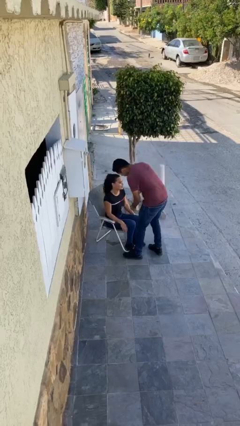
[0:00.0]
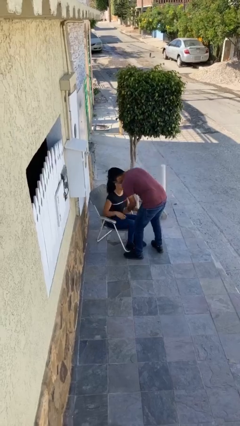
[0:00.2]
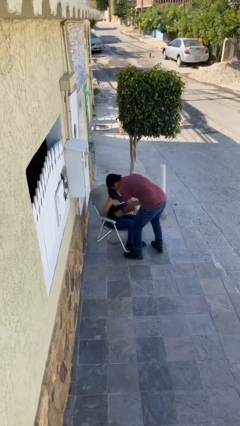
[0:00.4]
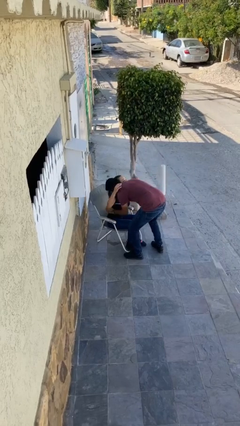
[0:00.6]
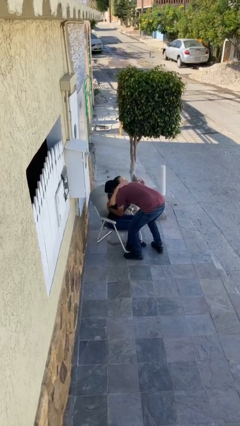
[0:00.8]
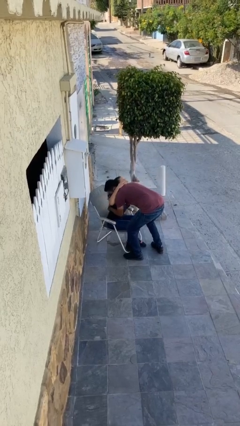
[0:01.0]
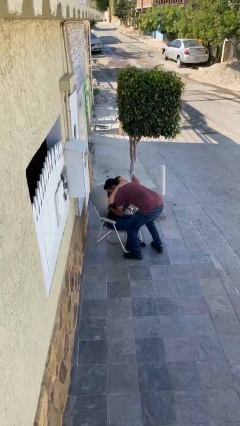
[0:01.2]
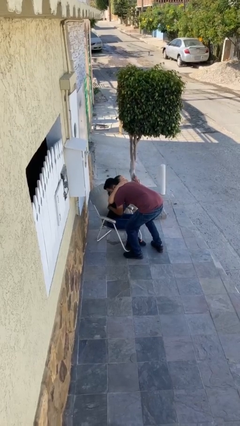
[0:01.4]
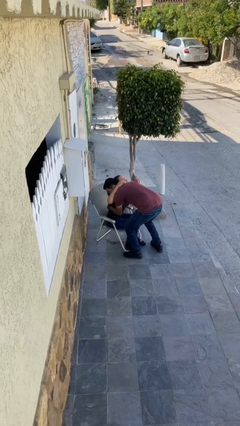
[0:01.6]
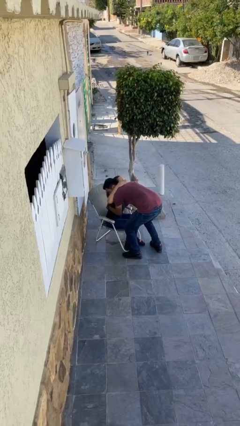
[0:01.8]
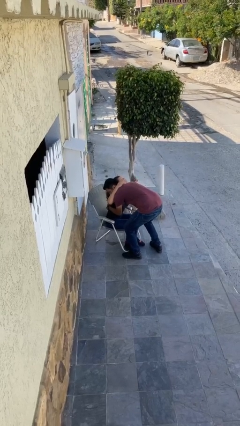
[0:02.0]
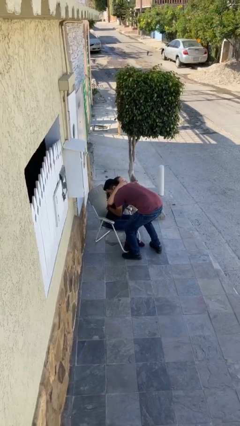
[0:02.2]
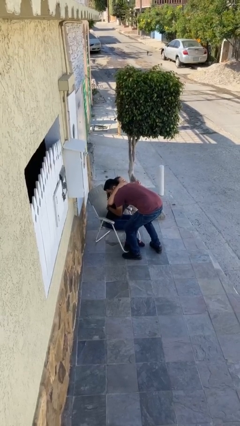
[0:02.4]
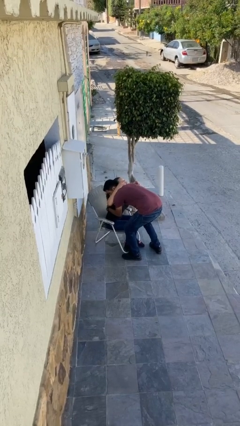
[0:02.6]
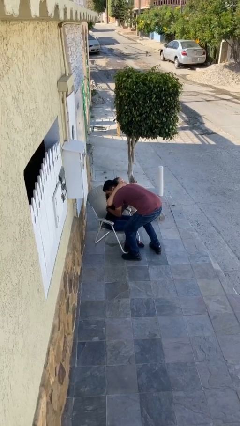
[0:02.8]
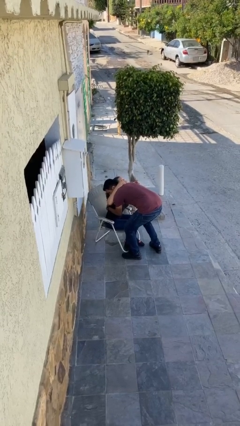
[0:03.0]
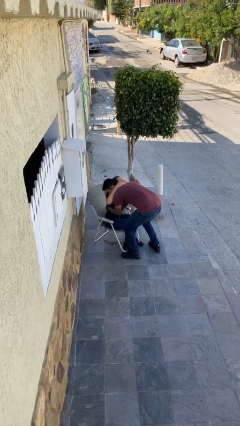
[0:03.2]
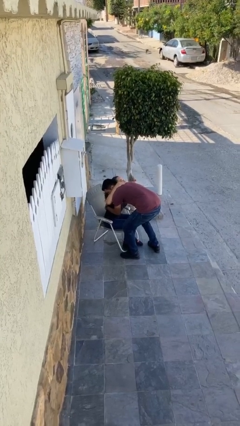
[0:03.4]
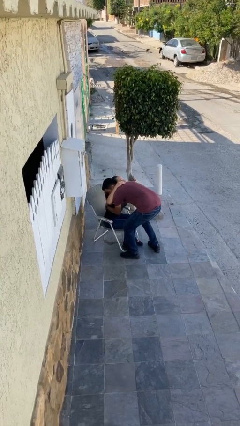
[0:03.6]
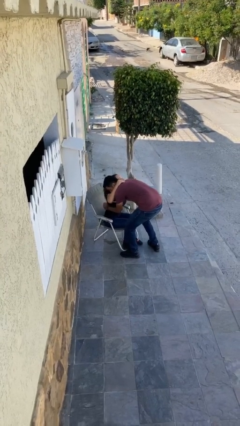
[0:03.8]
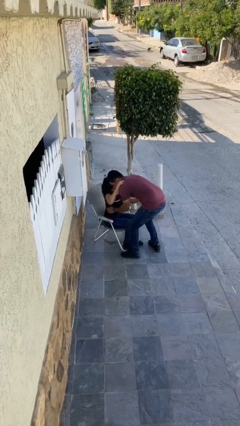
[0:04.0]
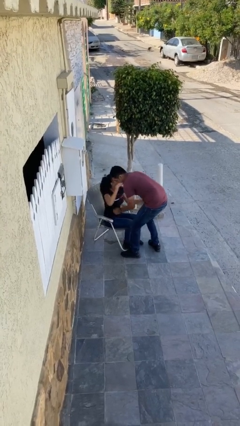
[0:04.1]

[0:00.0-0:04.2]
person embraces person

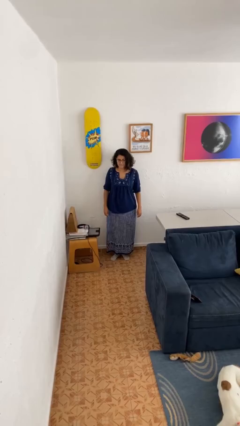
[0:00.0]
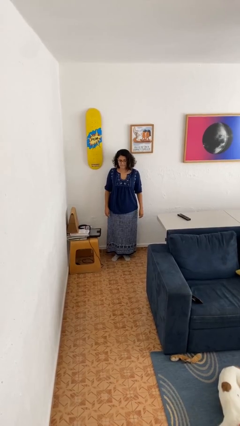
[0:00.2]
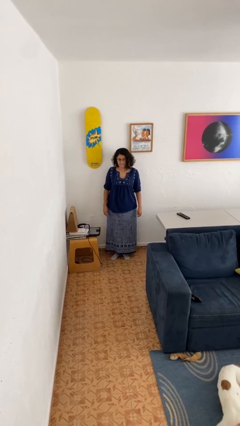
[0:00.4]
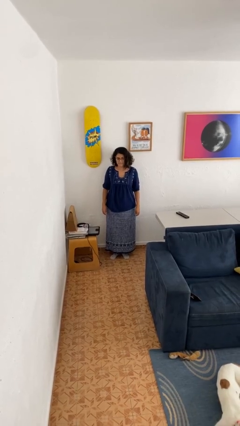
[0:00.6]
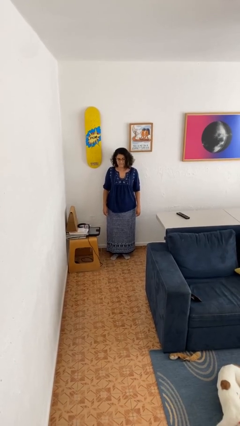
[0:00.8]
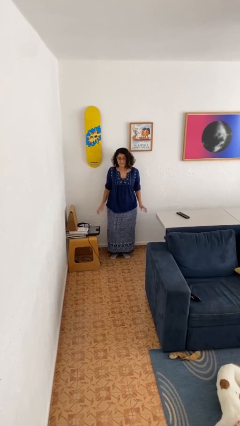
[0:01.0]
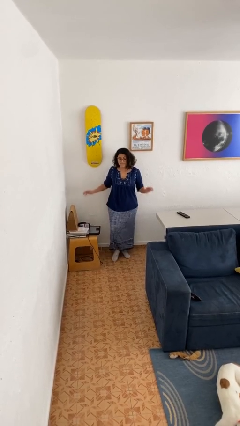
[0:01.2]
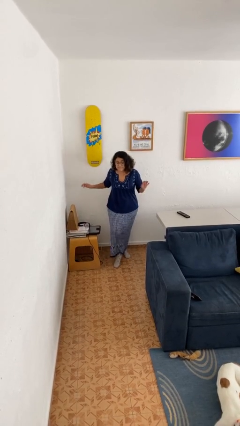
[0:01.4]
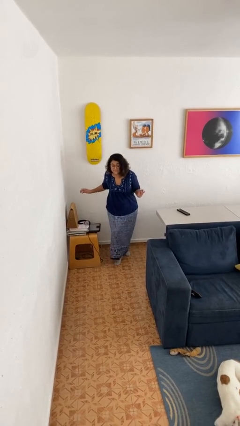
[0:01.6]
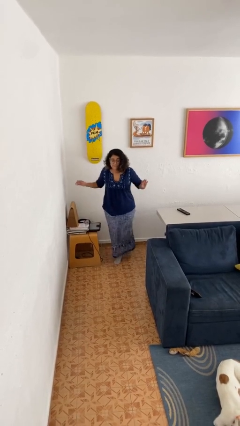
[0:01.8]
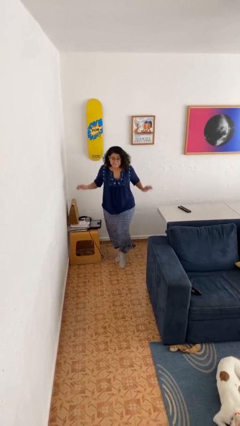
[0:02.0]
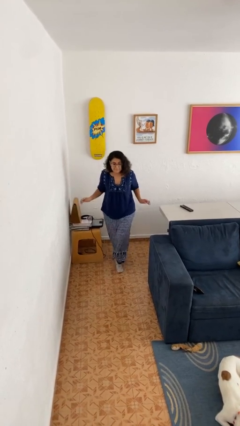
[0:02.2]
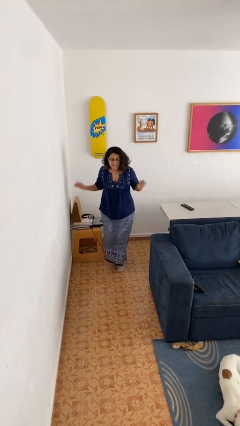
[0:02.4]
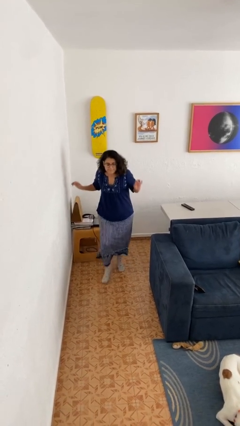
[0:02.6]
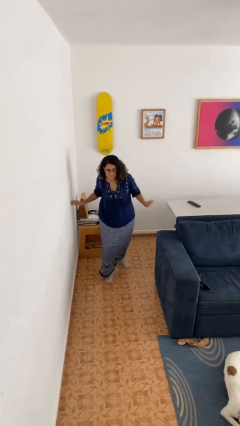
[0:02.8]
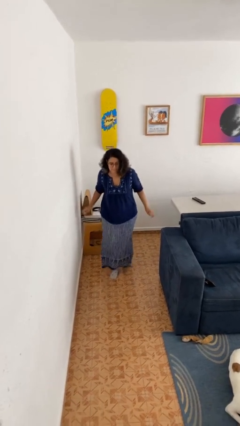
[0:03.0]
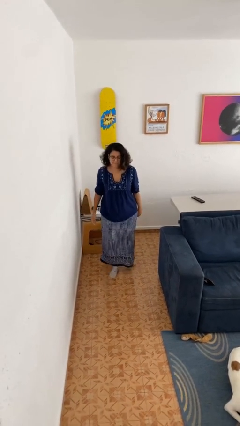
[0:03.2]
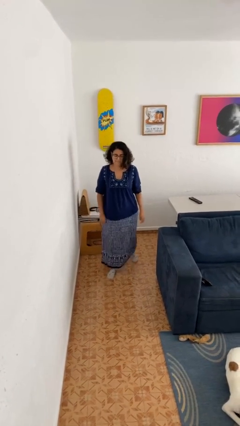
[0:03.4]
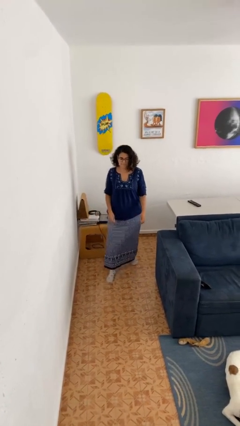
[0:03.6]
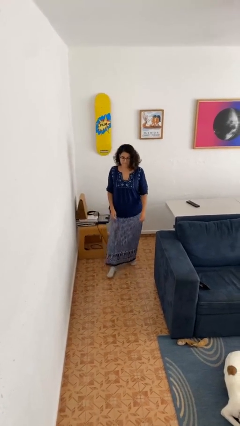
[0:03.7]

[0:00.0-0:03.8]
person walks tiptoe

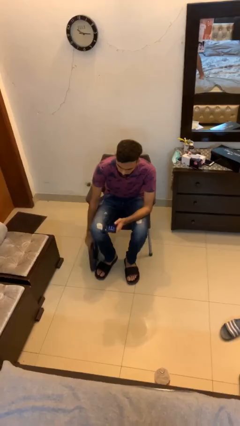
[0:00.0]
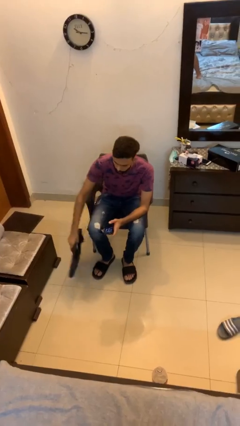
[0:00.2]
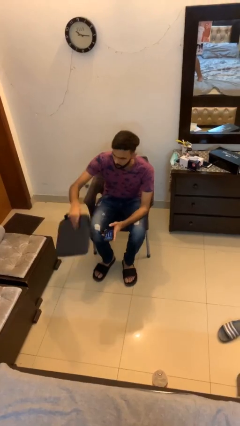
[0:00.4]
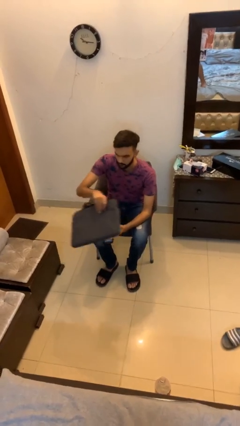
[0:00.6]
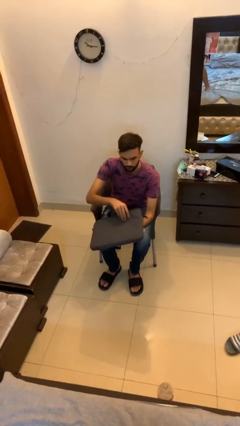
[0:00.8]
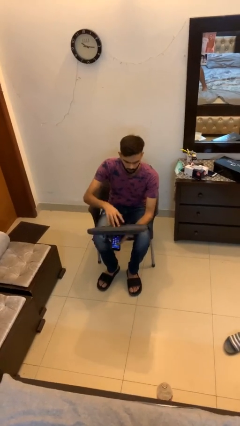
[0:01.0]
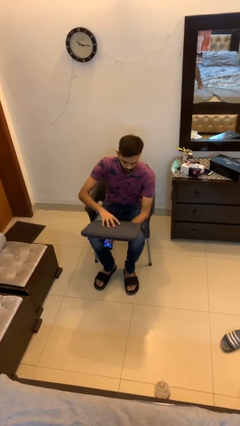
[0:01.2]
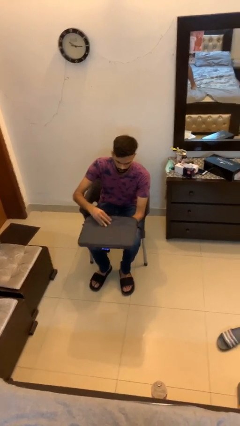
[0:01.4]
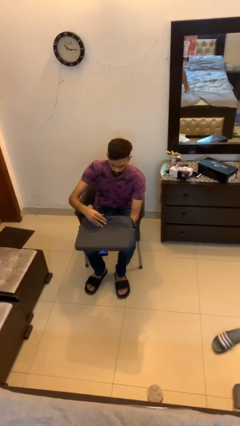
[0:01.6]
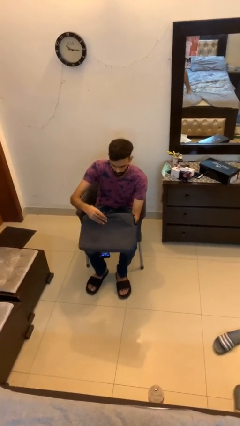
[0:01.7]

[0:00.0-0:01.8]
person picks up object from floor

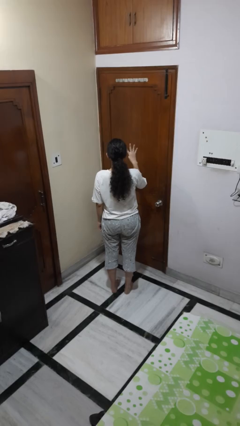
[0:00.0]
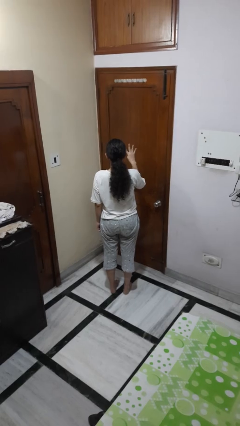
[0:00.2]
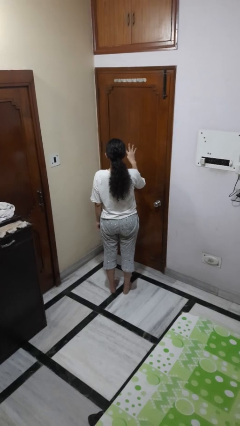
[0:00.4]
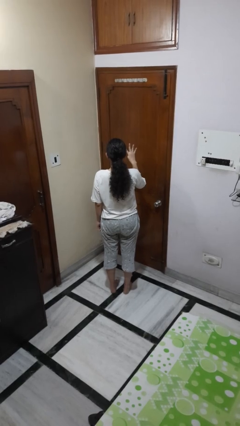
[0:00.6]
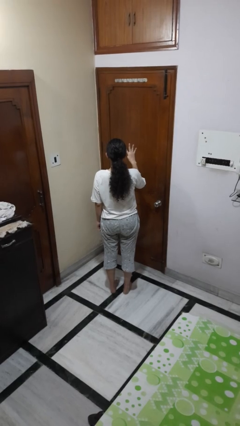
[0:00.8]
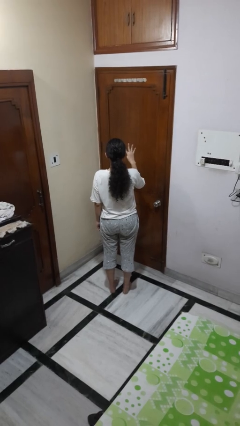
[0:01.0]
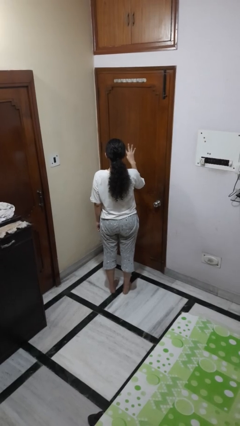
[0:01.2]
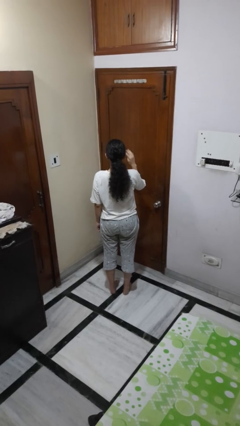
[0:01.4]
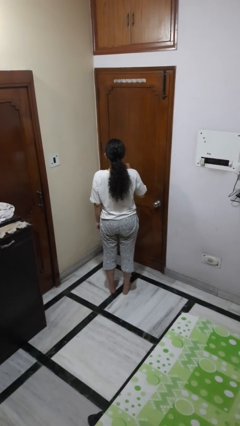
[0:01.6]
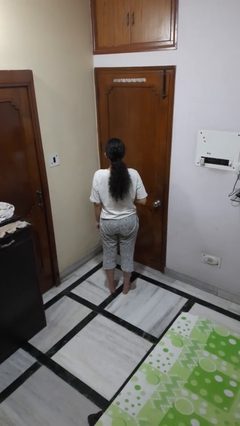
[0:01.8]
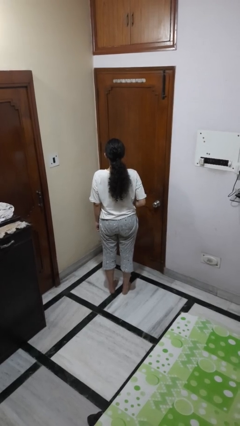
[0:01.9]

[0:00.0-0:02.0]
person gestures number four

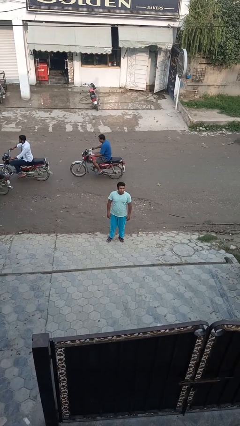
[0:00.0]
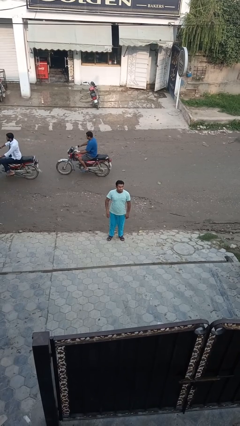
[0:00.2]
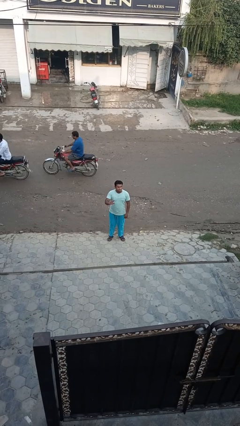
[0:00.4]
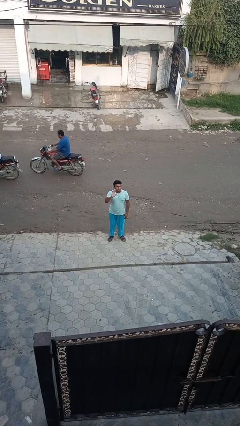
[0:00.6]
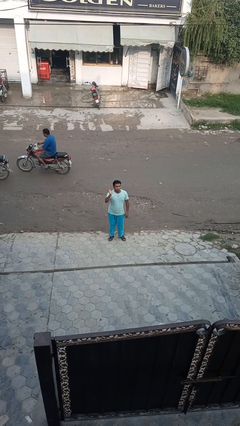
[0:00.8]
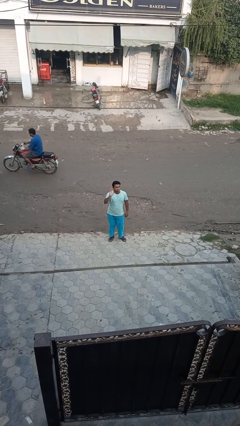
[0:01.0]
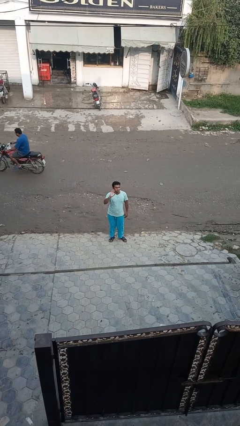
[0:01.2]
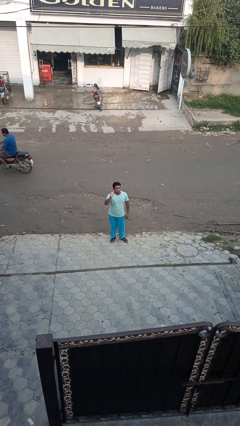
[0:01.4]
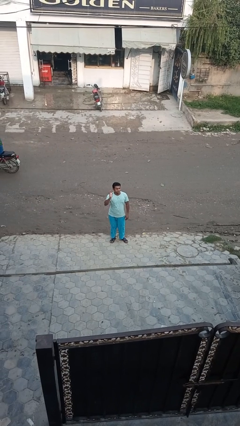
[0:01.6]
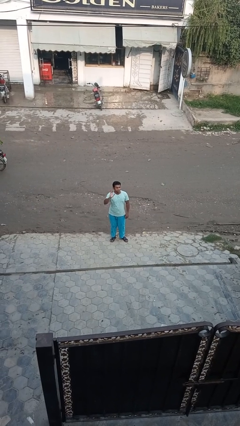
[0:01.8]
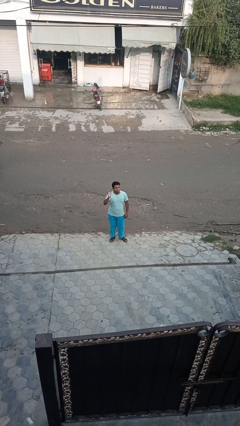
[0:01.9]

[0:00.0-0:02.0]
person waves at person

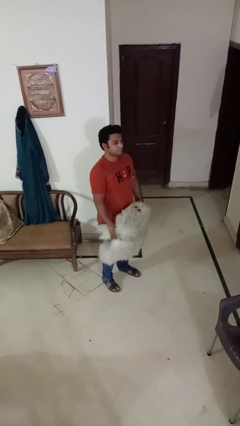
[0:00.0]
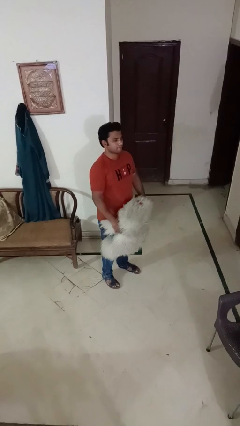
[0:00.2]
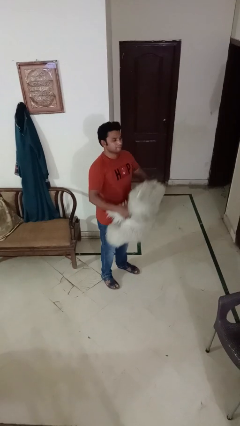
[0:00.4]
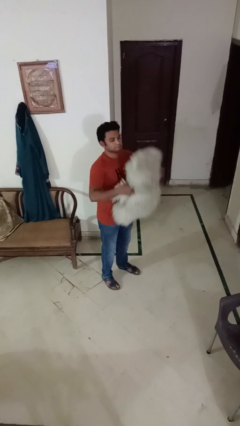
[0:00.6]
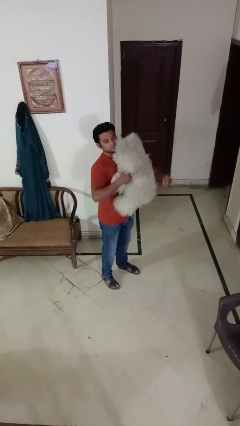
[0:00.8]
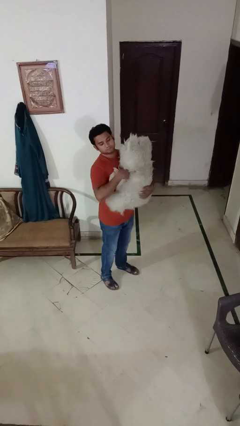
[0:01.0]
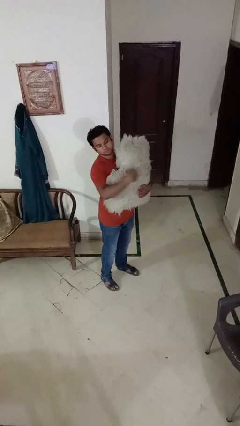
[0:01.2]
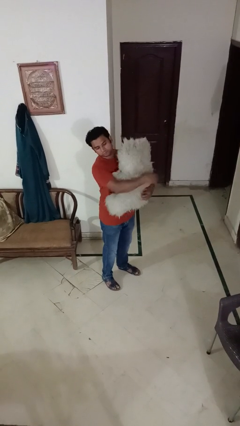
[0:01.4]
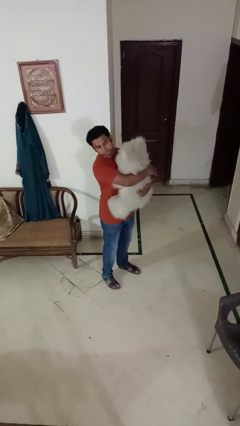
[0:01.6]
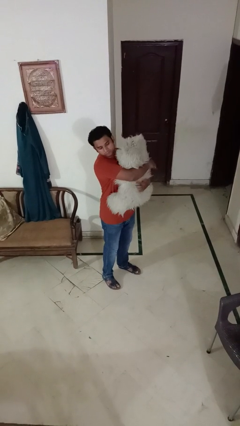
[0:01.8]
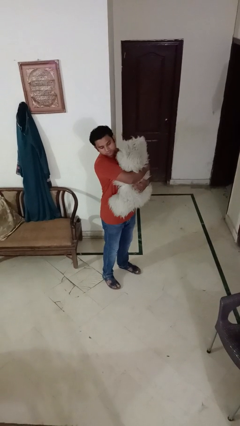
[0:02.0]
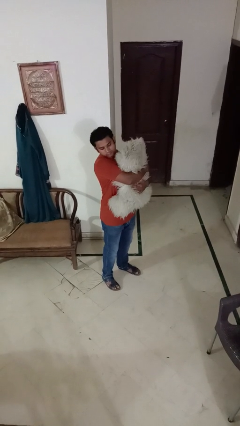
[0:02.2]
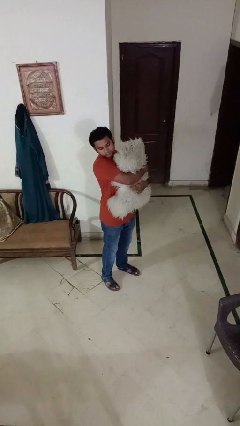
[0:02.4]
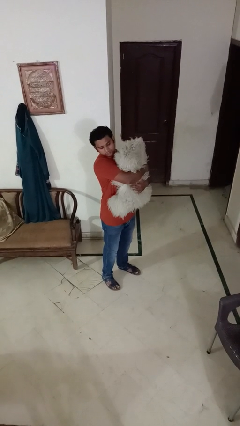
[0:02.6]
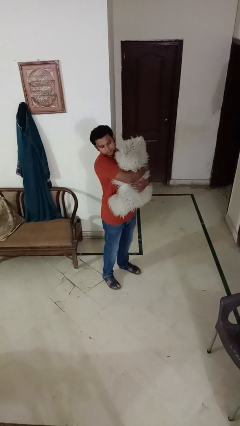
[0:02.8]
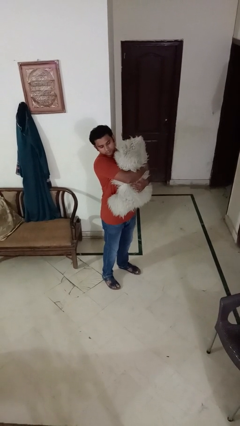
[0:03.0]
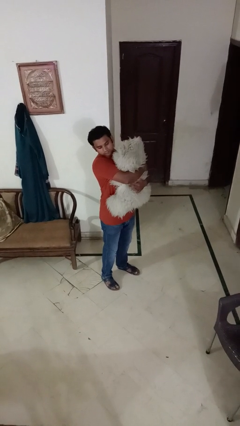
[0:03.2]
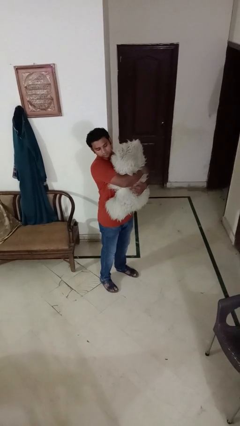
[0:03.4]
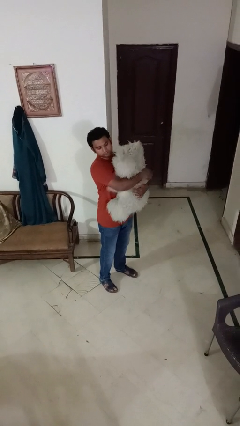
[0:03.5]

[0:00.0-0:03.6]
person hugs stuffed animal
